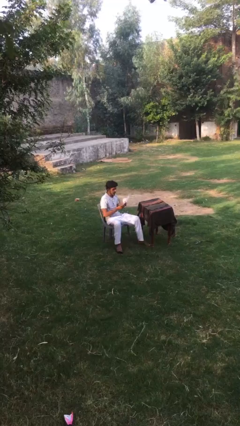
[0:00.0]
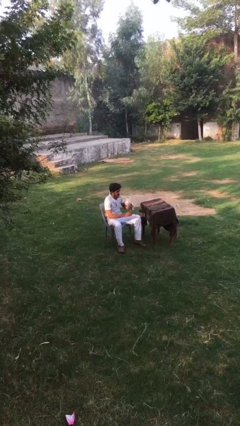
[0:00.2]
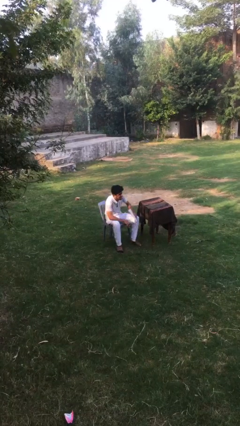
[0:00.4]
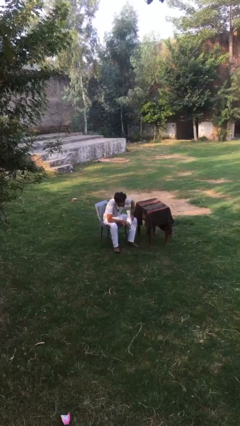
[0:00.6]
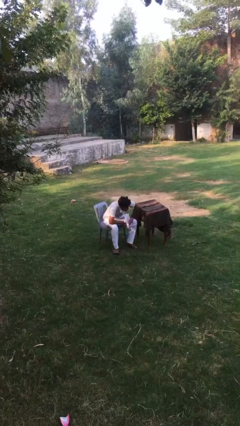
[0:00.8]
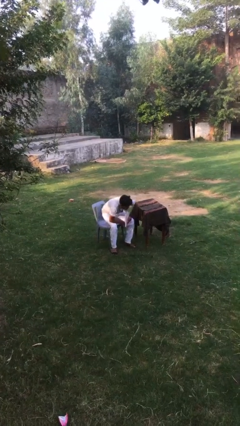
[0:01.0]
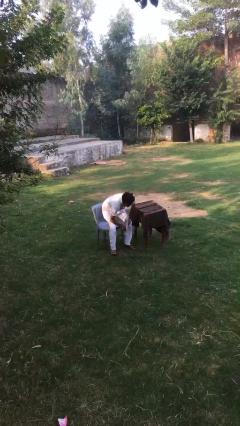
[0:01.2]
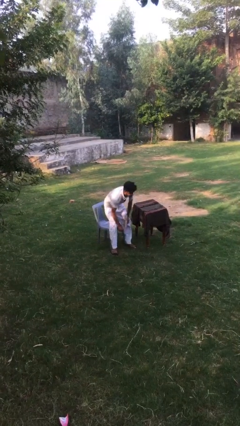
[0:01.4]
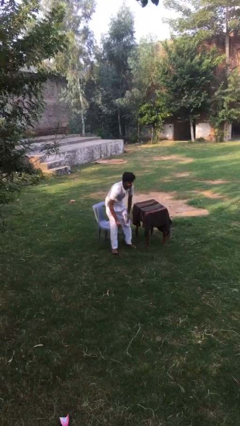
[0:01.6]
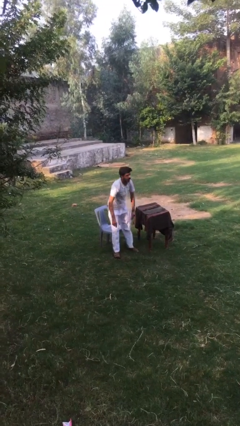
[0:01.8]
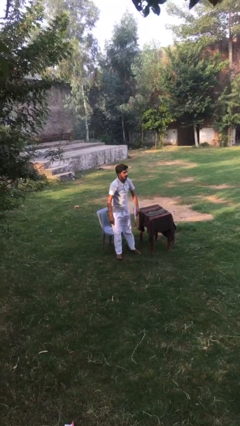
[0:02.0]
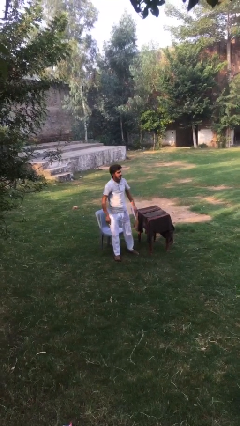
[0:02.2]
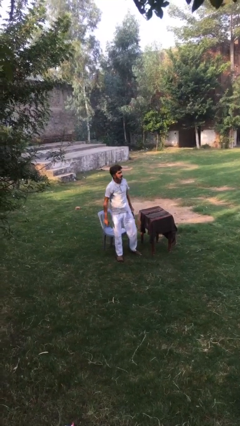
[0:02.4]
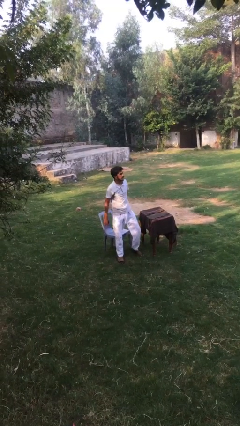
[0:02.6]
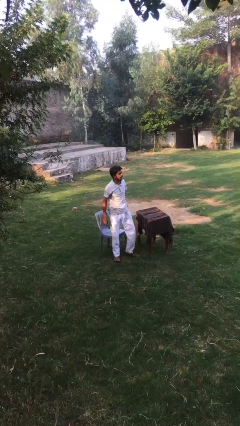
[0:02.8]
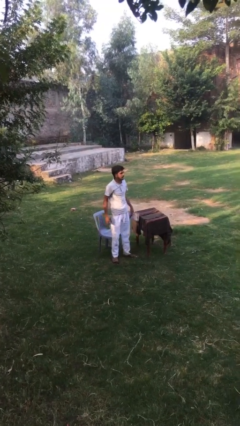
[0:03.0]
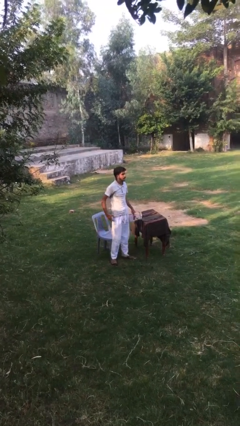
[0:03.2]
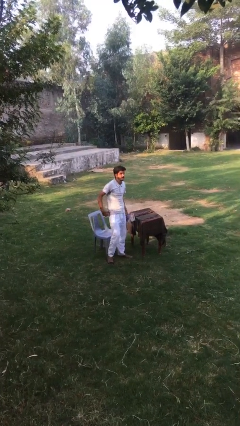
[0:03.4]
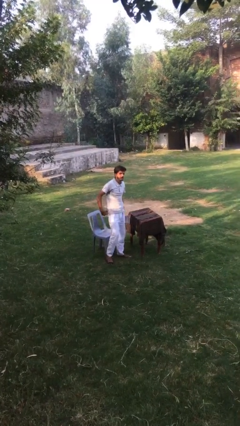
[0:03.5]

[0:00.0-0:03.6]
person stands up

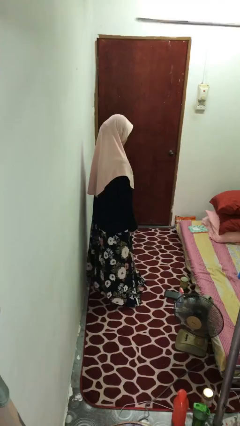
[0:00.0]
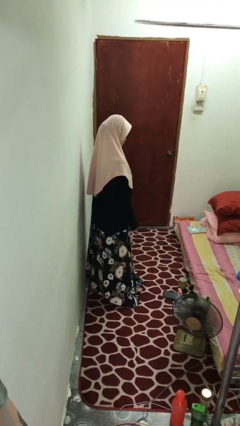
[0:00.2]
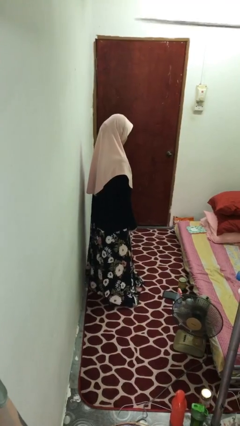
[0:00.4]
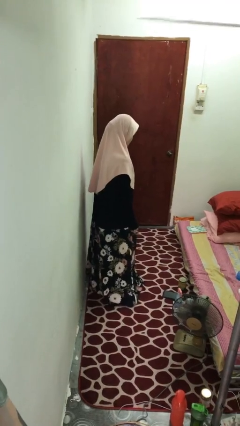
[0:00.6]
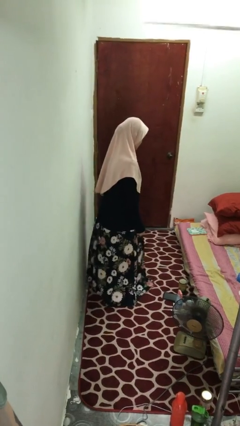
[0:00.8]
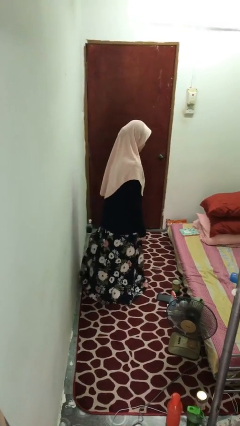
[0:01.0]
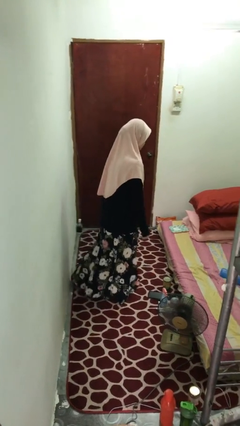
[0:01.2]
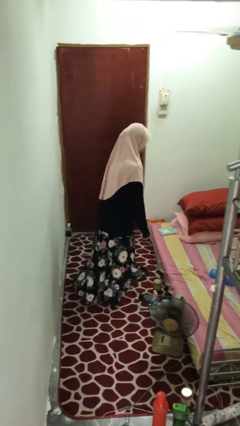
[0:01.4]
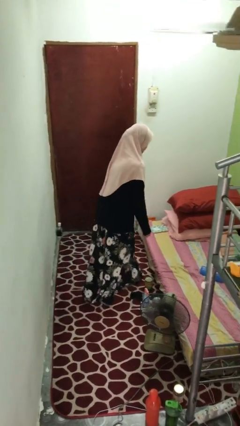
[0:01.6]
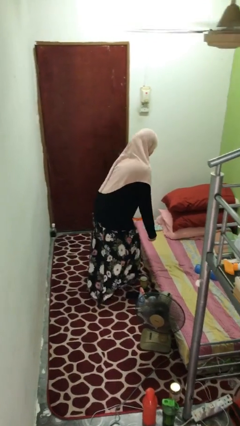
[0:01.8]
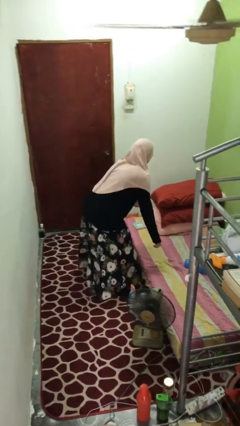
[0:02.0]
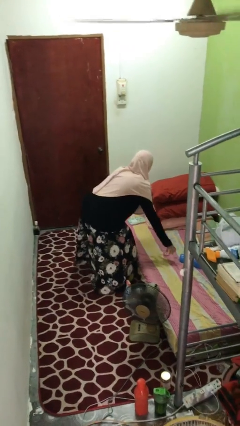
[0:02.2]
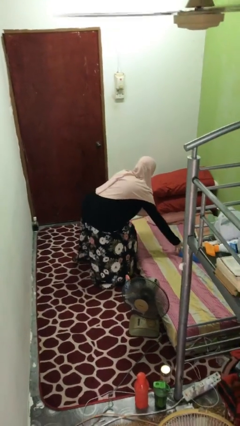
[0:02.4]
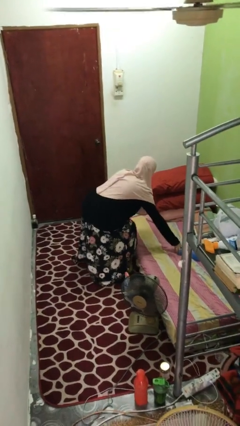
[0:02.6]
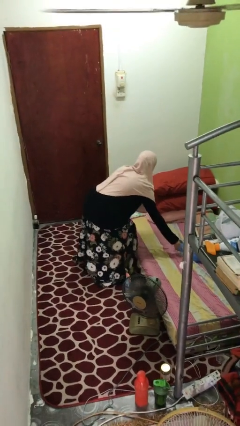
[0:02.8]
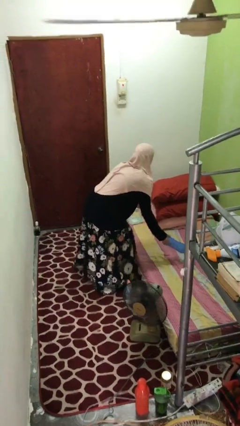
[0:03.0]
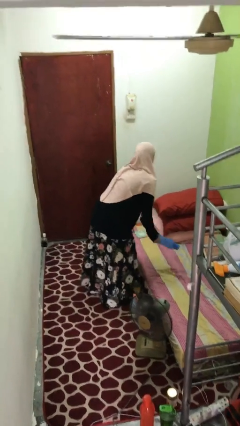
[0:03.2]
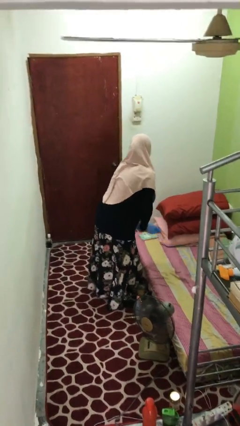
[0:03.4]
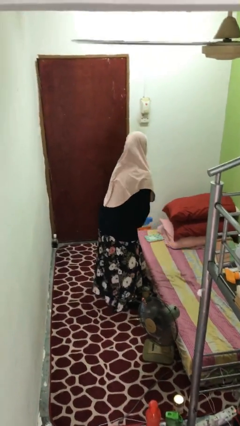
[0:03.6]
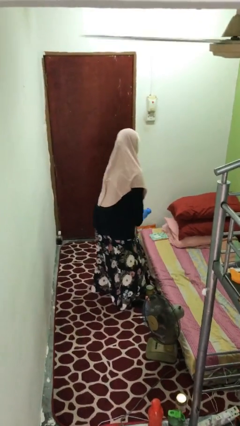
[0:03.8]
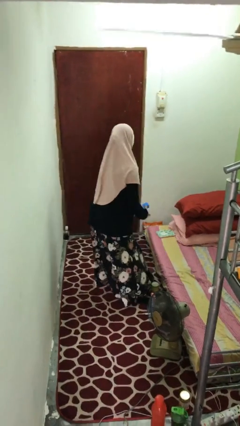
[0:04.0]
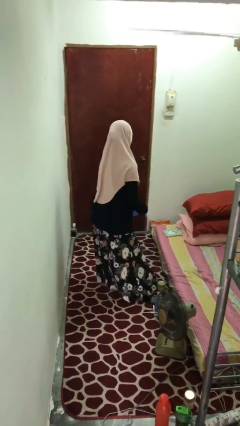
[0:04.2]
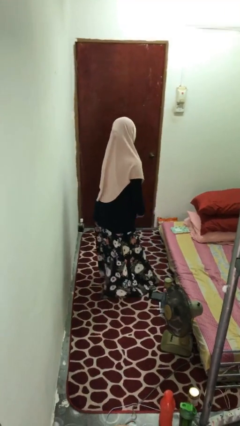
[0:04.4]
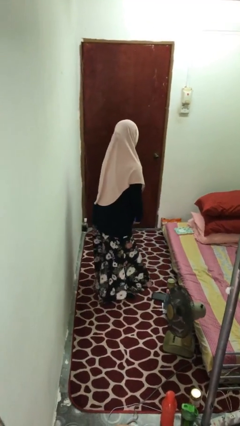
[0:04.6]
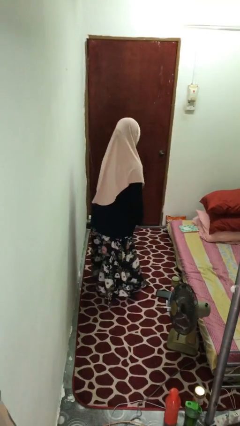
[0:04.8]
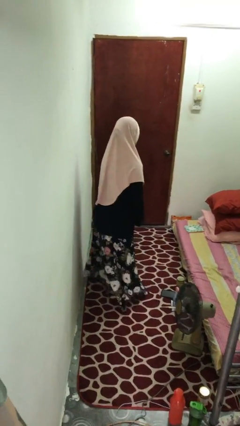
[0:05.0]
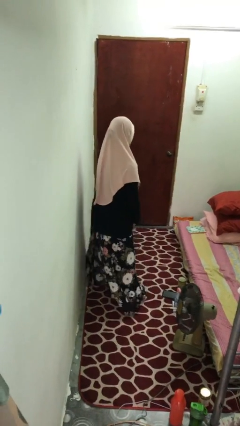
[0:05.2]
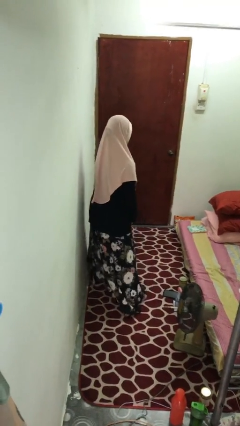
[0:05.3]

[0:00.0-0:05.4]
person picks up object from bed

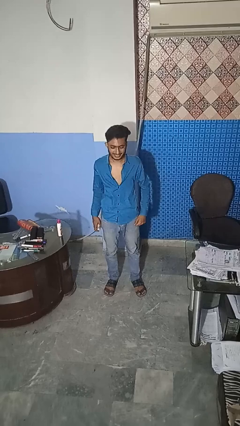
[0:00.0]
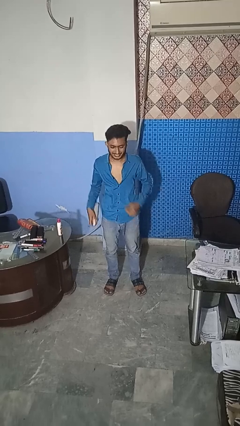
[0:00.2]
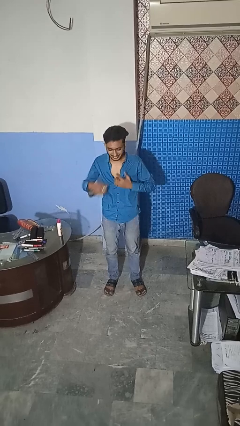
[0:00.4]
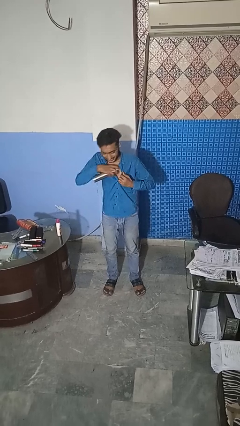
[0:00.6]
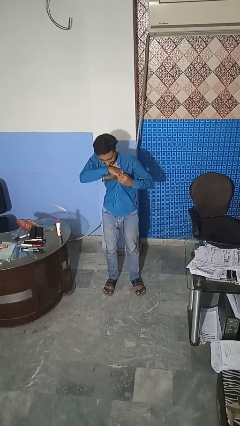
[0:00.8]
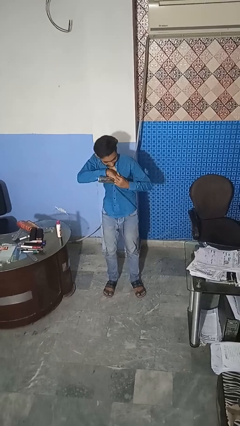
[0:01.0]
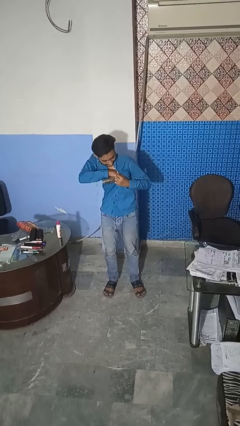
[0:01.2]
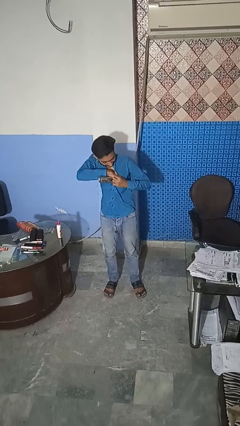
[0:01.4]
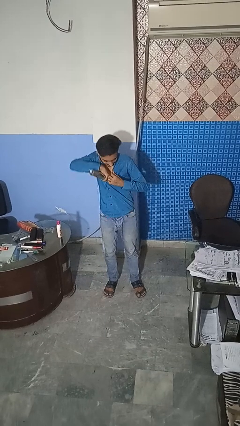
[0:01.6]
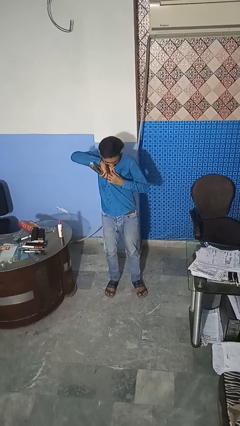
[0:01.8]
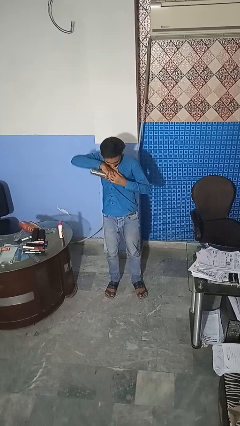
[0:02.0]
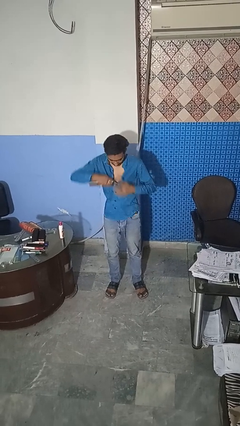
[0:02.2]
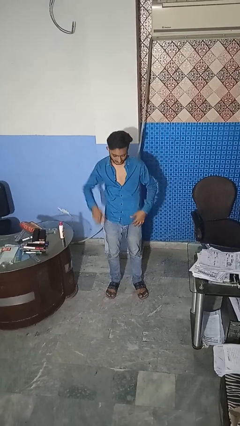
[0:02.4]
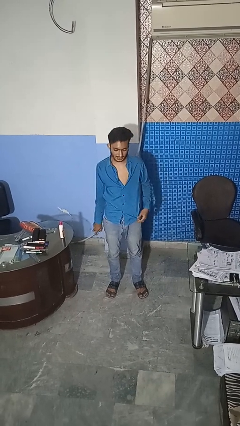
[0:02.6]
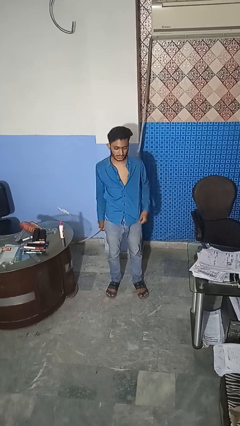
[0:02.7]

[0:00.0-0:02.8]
person applies deodorant

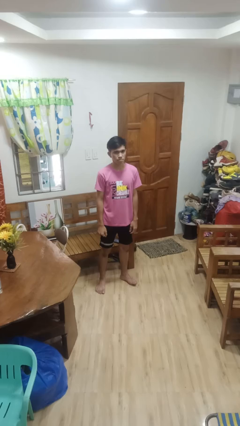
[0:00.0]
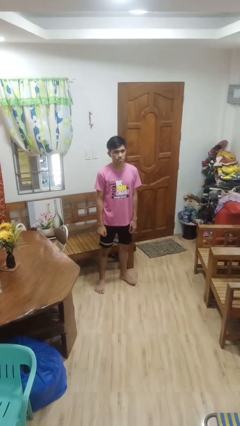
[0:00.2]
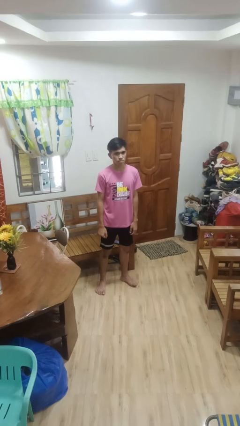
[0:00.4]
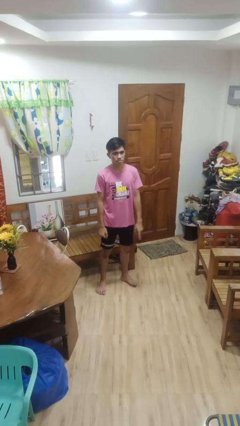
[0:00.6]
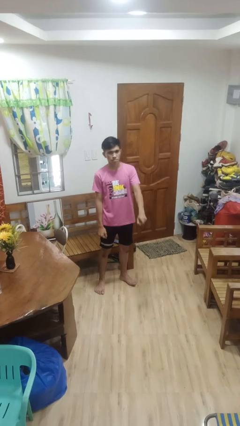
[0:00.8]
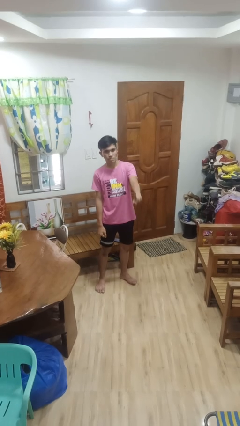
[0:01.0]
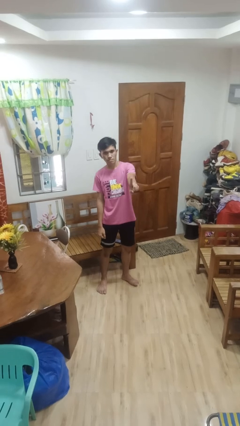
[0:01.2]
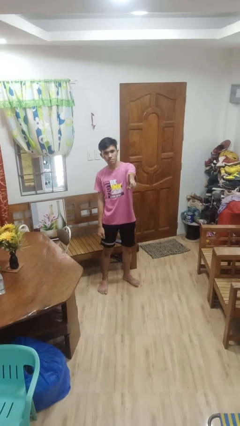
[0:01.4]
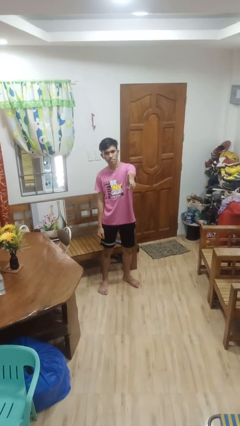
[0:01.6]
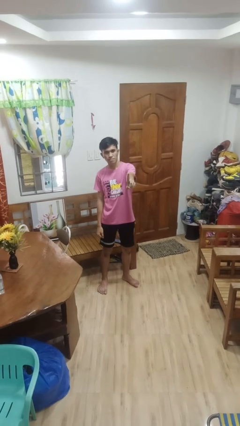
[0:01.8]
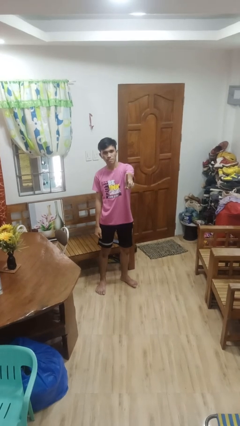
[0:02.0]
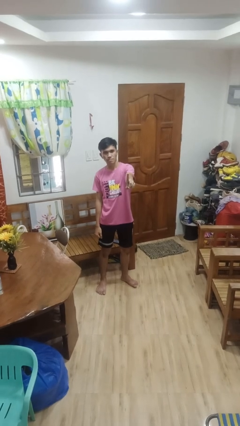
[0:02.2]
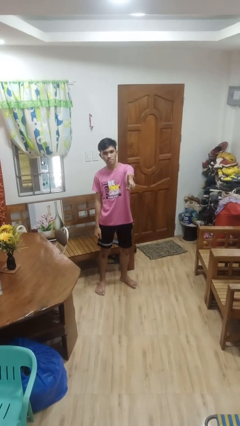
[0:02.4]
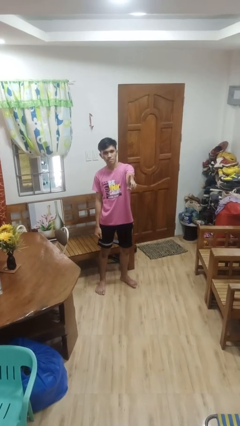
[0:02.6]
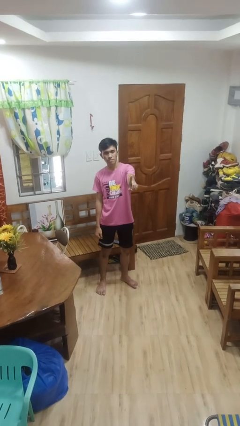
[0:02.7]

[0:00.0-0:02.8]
person gestures number one

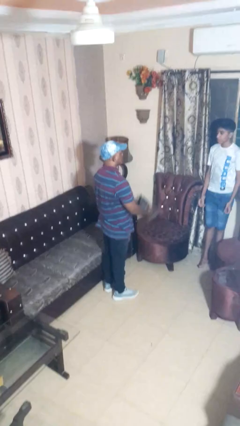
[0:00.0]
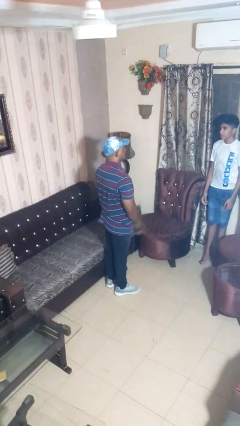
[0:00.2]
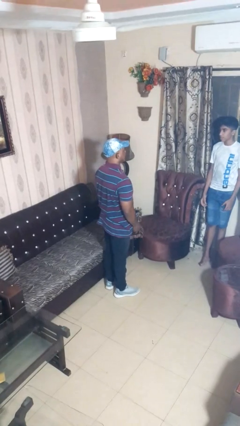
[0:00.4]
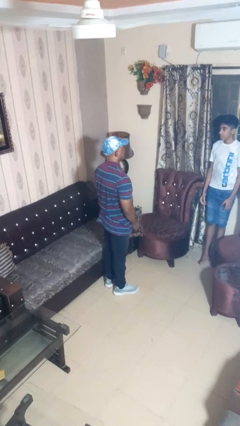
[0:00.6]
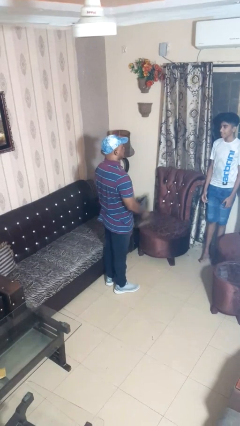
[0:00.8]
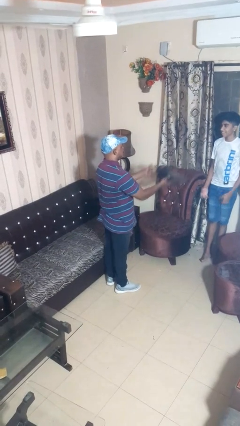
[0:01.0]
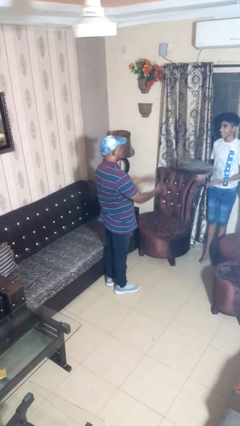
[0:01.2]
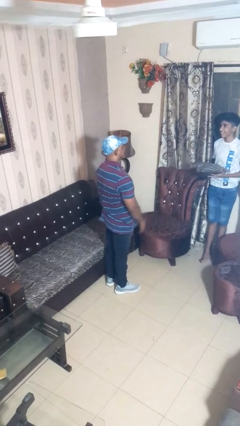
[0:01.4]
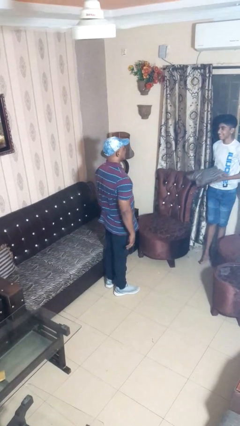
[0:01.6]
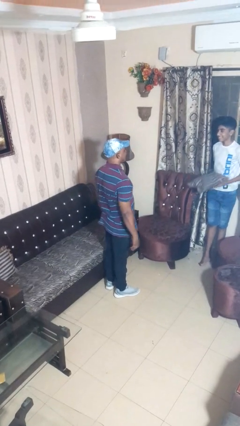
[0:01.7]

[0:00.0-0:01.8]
person throws object to person

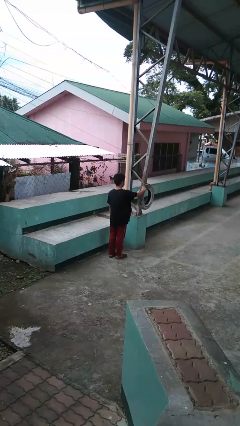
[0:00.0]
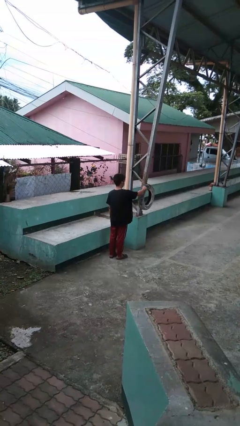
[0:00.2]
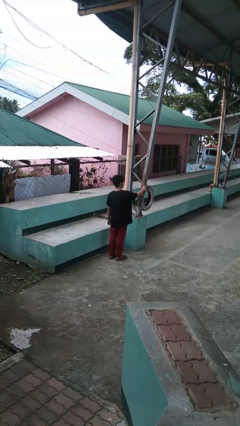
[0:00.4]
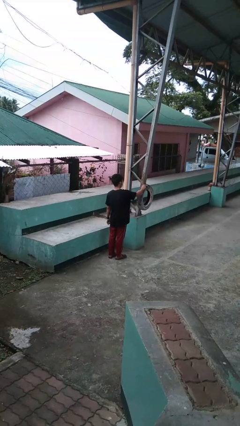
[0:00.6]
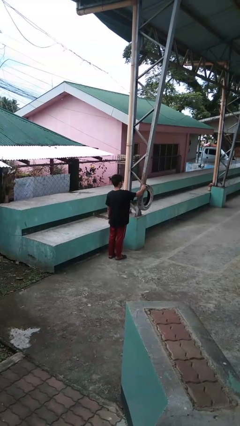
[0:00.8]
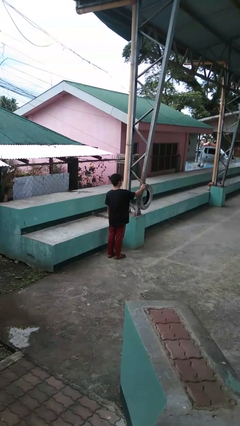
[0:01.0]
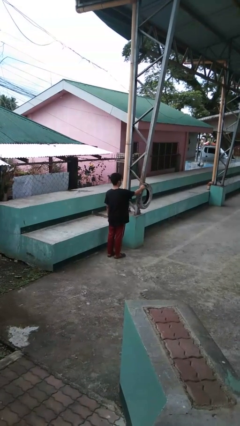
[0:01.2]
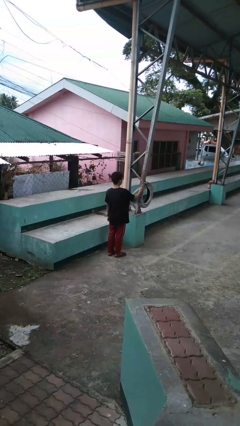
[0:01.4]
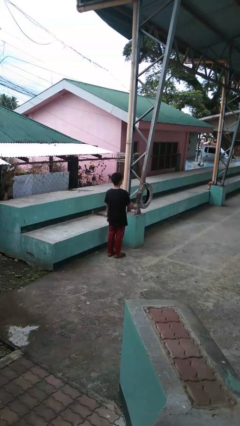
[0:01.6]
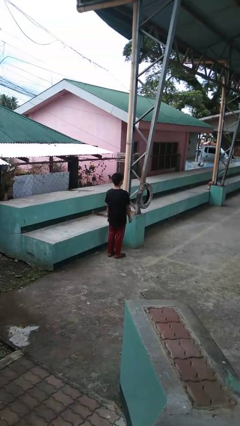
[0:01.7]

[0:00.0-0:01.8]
person taps object with finger
